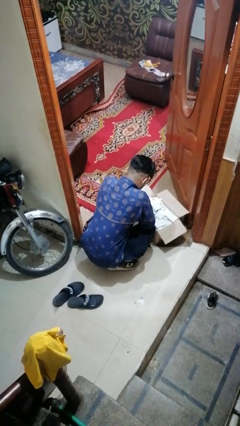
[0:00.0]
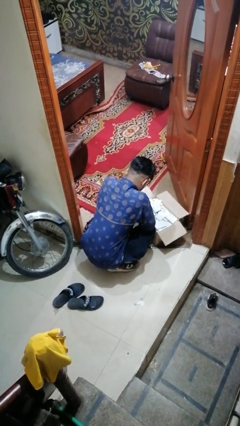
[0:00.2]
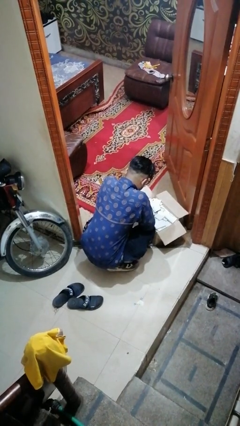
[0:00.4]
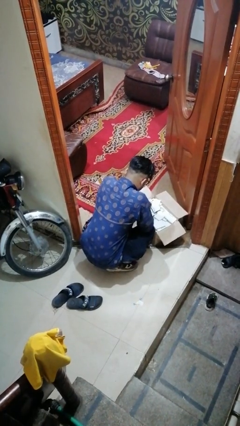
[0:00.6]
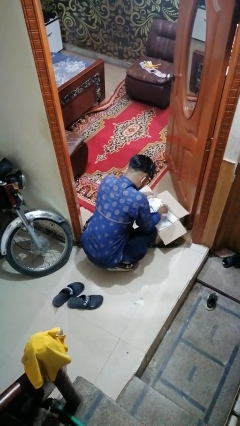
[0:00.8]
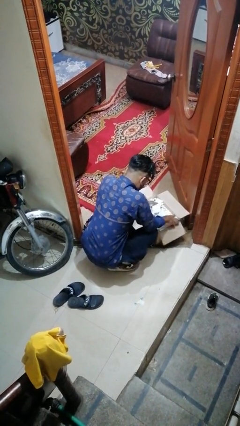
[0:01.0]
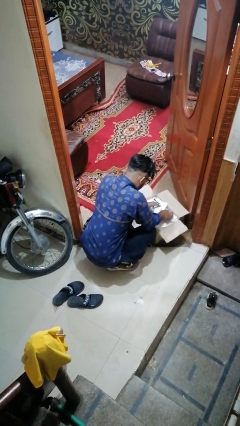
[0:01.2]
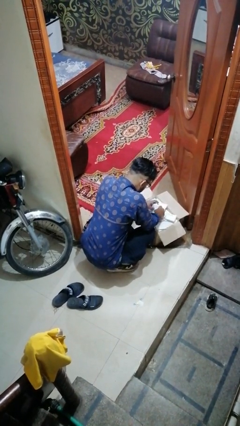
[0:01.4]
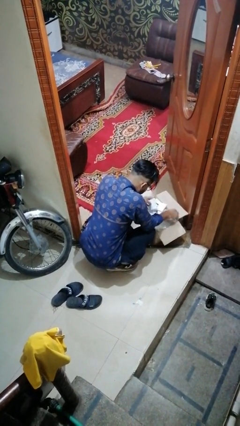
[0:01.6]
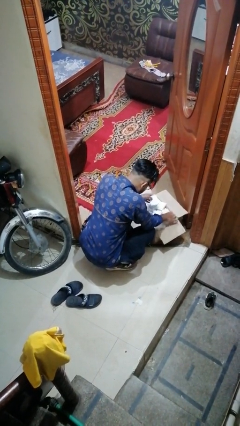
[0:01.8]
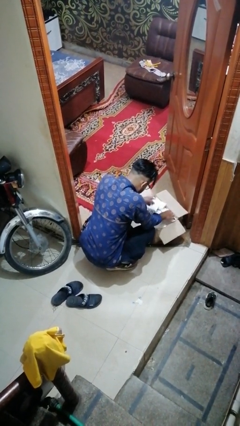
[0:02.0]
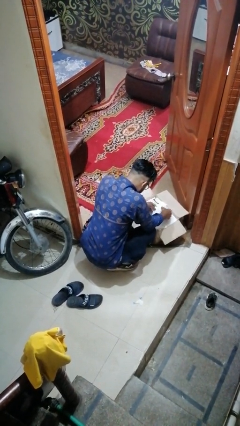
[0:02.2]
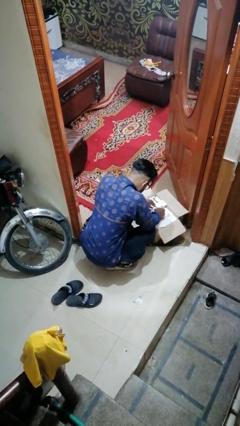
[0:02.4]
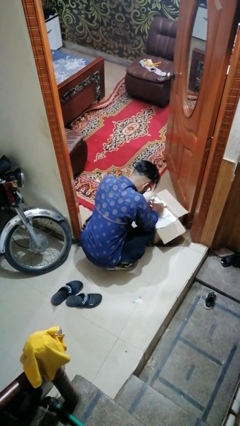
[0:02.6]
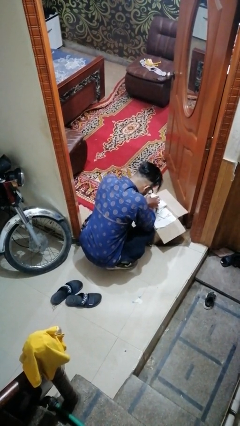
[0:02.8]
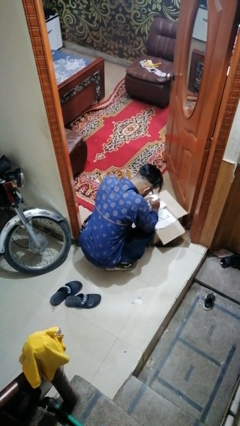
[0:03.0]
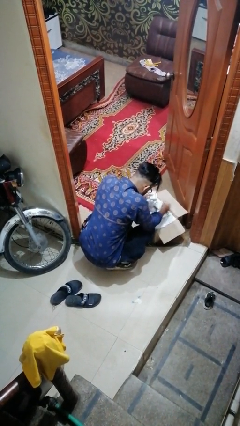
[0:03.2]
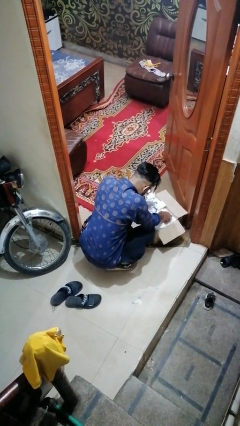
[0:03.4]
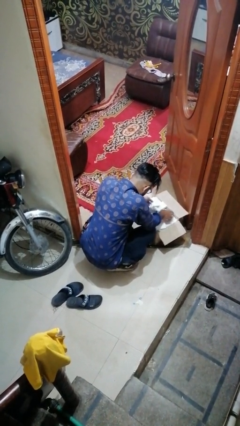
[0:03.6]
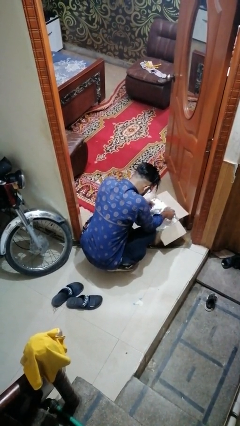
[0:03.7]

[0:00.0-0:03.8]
person searches in box

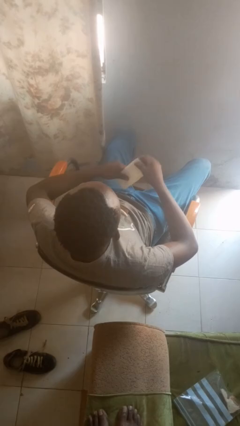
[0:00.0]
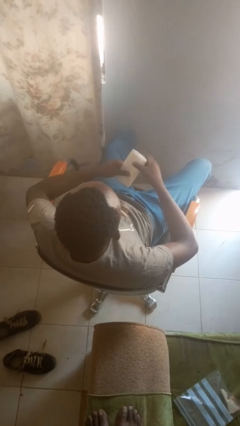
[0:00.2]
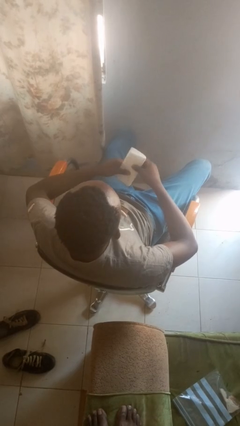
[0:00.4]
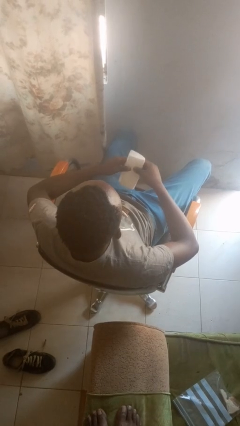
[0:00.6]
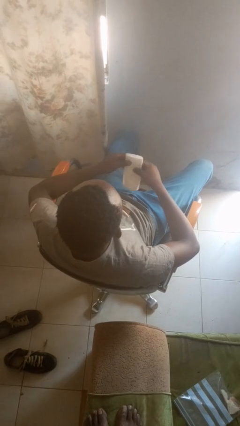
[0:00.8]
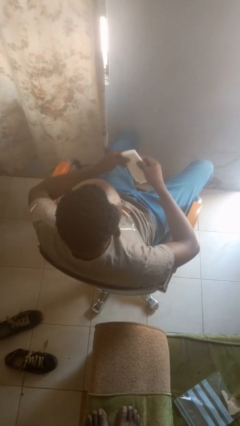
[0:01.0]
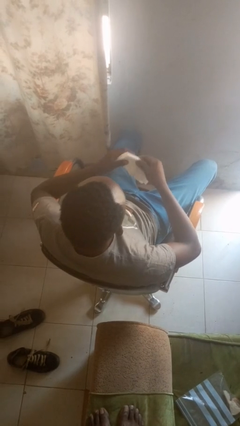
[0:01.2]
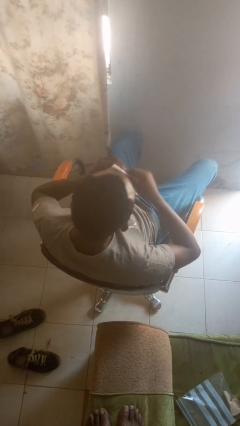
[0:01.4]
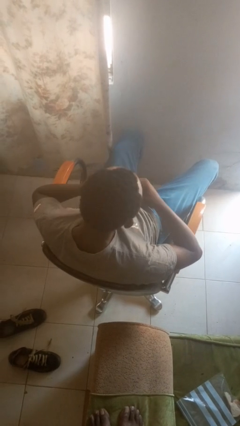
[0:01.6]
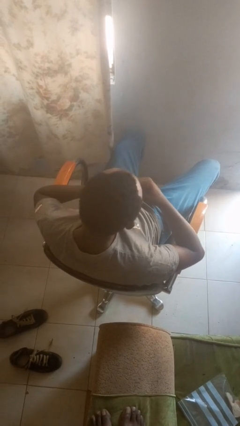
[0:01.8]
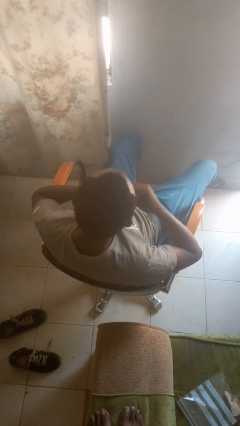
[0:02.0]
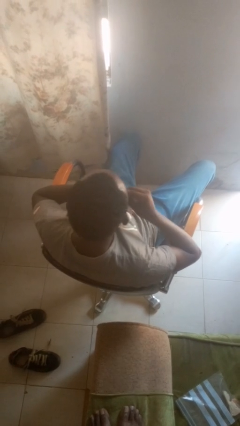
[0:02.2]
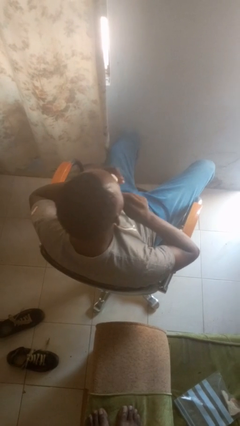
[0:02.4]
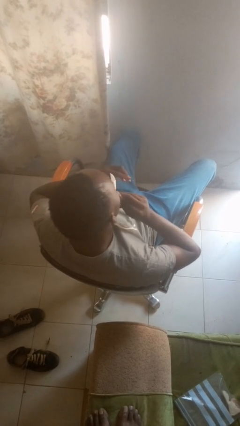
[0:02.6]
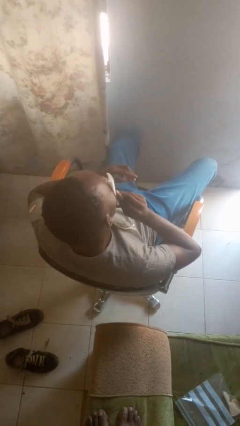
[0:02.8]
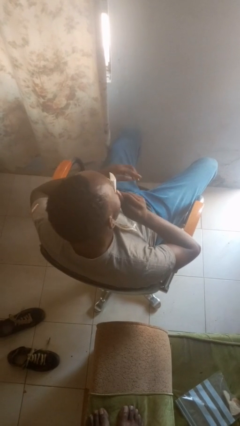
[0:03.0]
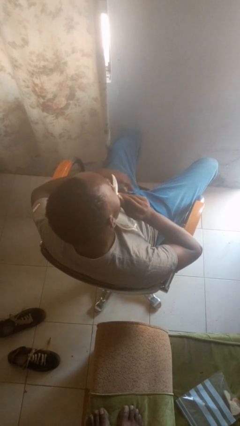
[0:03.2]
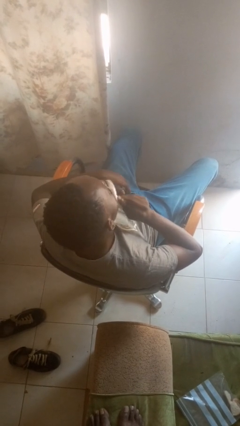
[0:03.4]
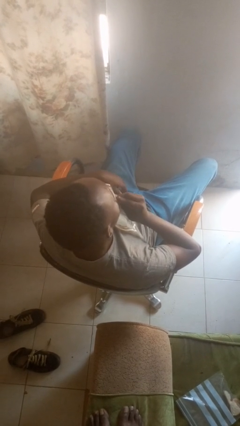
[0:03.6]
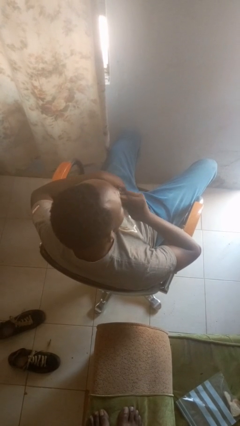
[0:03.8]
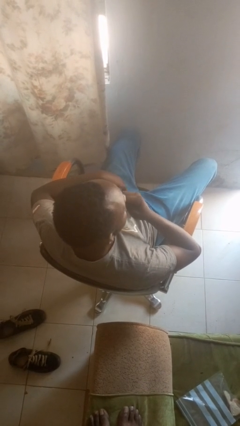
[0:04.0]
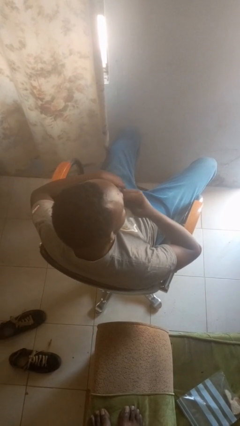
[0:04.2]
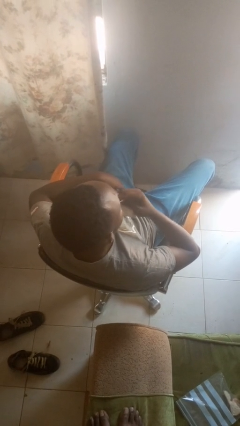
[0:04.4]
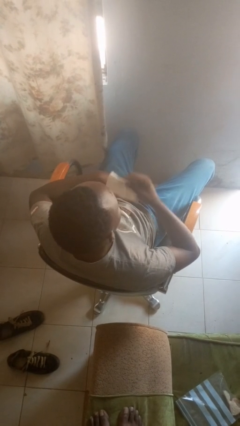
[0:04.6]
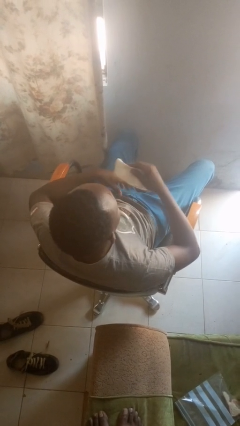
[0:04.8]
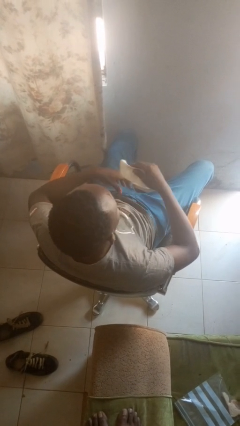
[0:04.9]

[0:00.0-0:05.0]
person wipes mouth with napkin

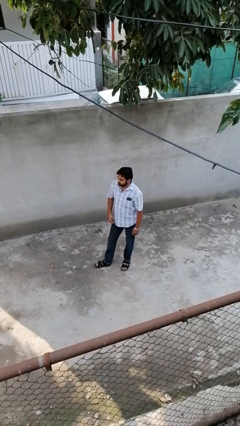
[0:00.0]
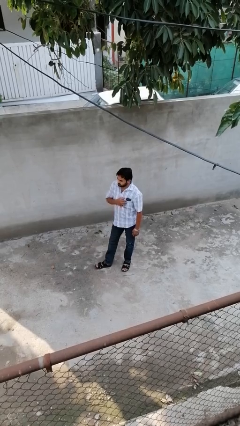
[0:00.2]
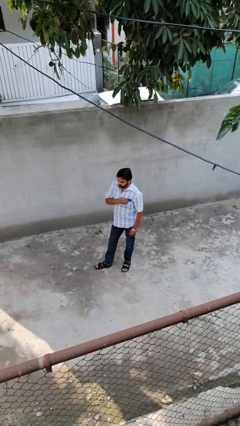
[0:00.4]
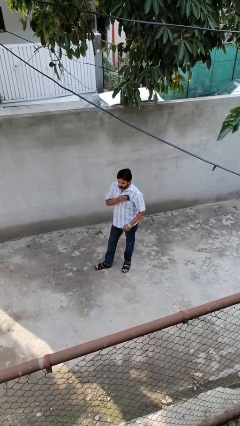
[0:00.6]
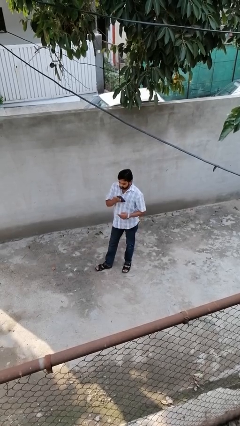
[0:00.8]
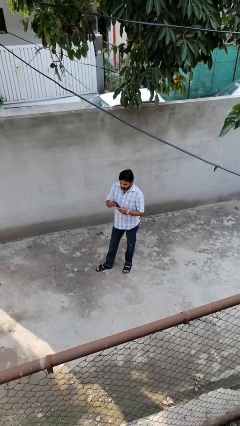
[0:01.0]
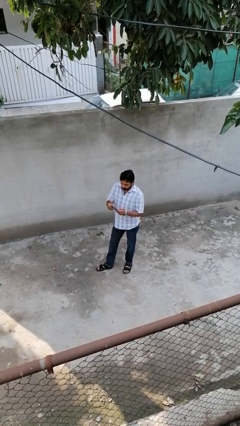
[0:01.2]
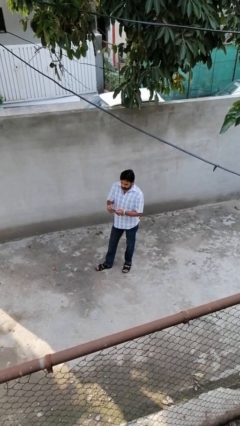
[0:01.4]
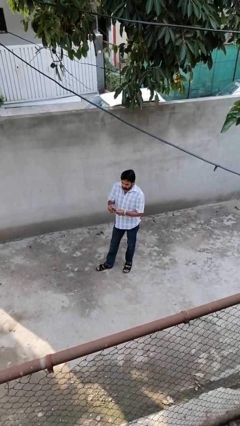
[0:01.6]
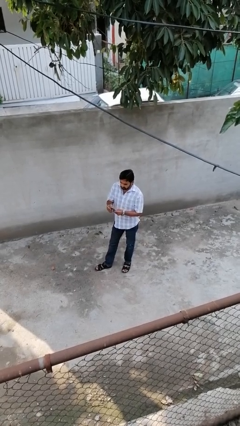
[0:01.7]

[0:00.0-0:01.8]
person takes phone from pocket

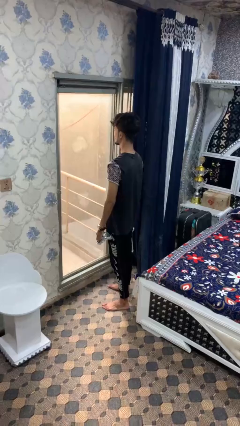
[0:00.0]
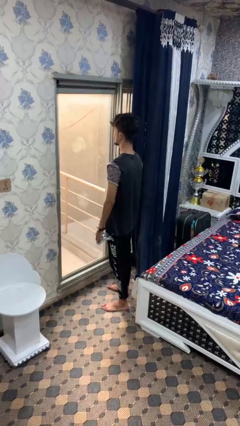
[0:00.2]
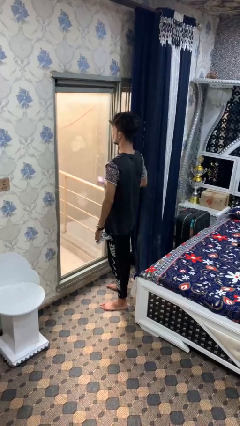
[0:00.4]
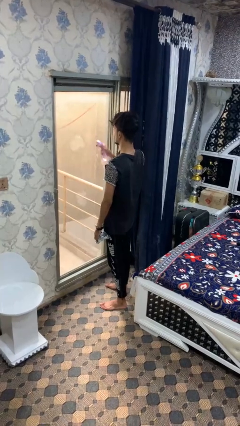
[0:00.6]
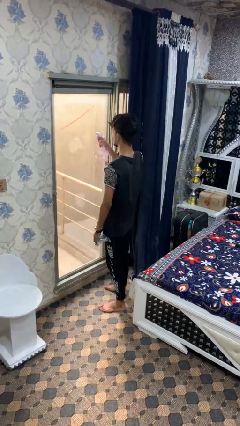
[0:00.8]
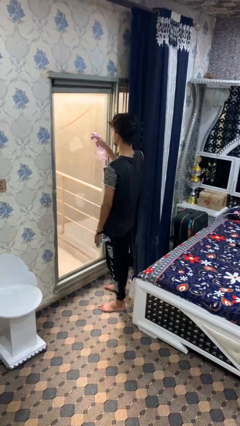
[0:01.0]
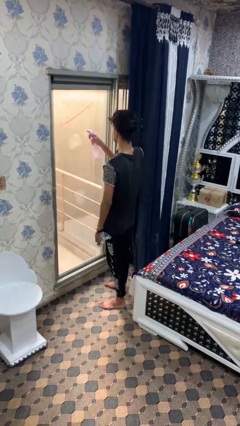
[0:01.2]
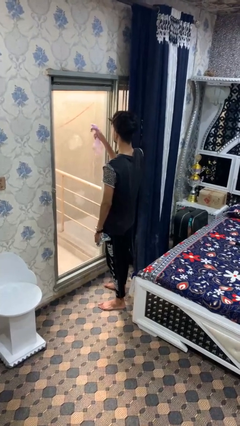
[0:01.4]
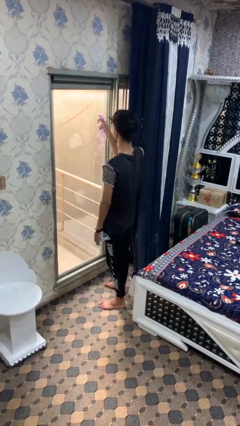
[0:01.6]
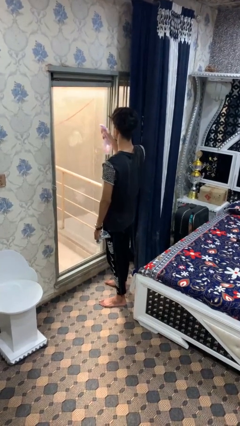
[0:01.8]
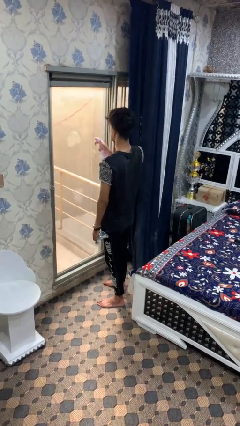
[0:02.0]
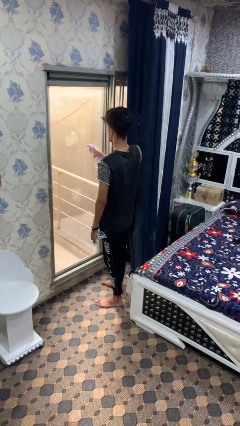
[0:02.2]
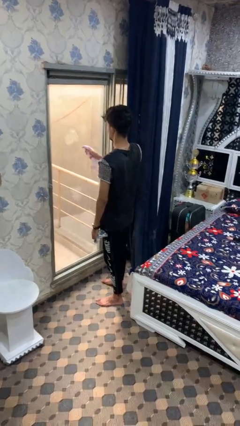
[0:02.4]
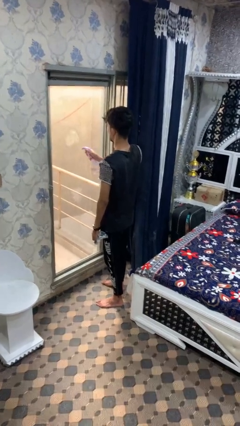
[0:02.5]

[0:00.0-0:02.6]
person sprays from bottle

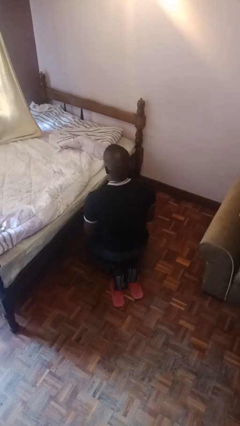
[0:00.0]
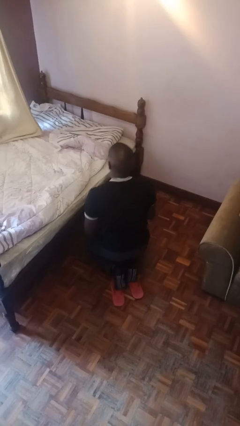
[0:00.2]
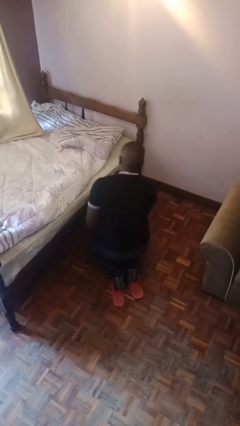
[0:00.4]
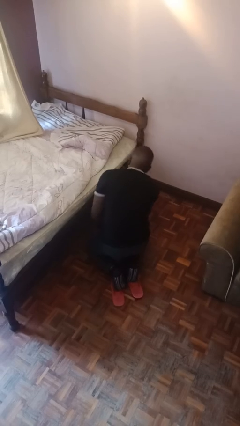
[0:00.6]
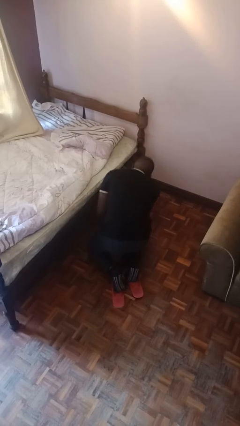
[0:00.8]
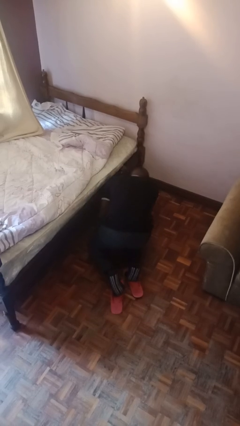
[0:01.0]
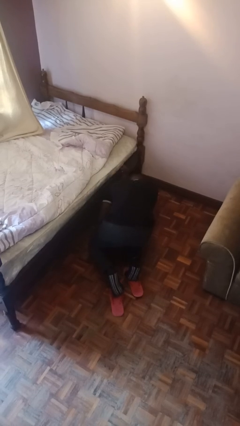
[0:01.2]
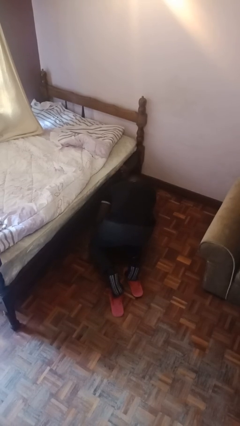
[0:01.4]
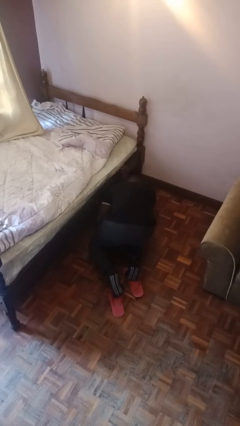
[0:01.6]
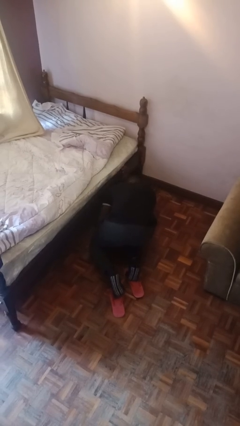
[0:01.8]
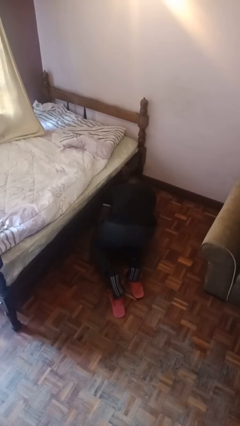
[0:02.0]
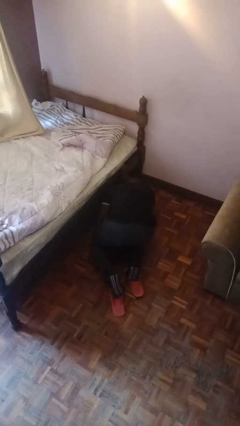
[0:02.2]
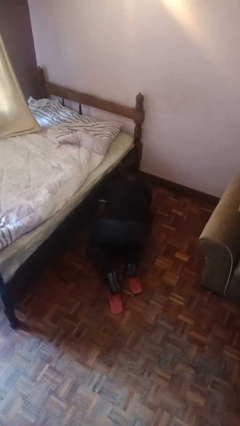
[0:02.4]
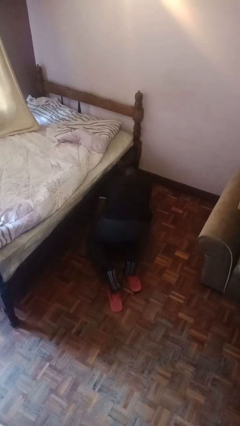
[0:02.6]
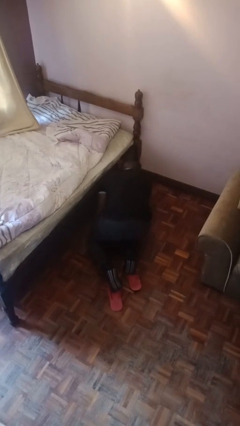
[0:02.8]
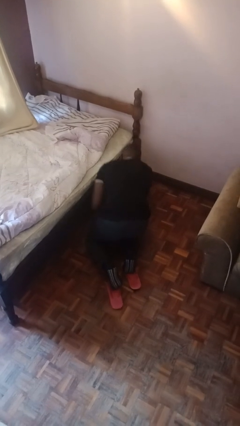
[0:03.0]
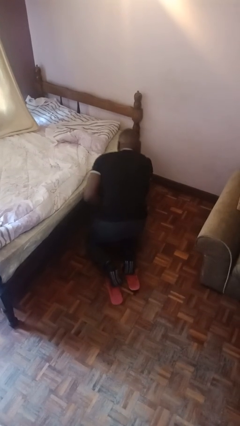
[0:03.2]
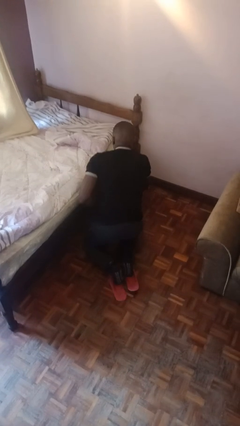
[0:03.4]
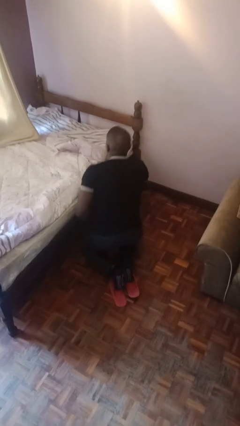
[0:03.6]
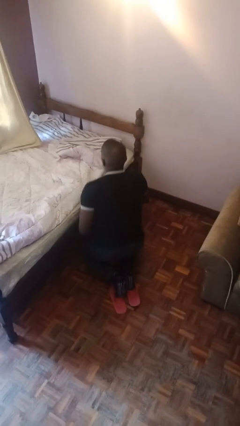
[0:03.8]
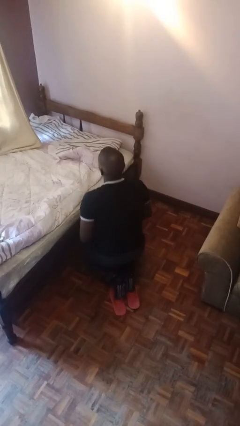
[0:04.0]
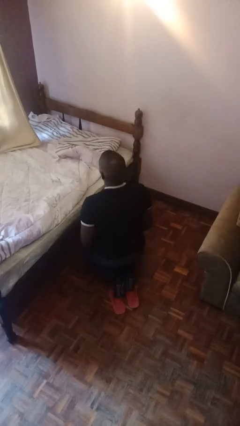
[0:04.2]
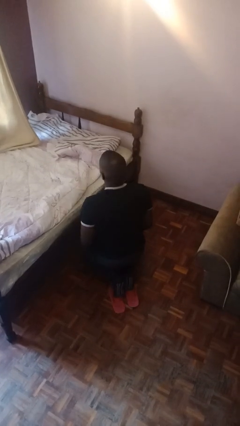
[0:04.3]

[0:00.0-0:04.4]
person searches under bed
